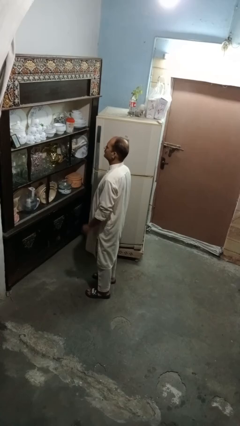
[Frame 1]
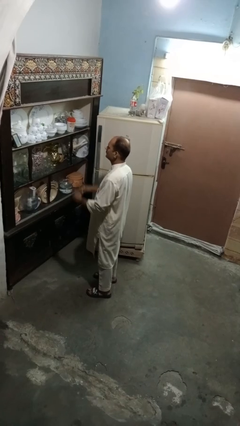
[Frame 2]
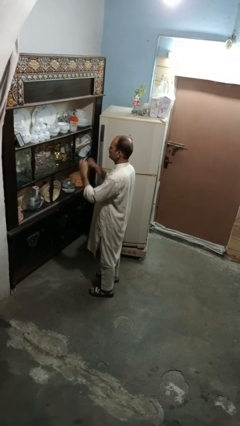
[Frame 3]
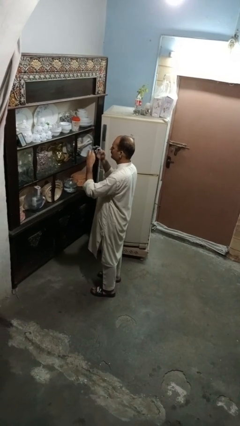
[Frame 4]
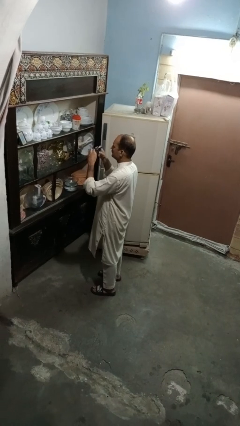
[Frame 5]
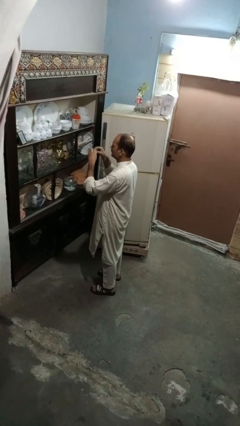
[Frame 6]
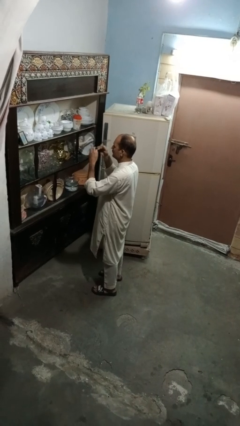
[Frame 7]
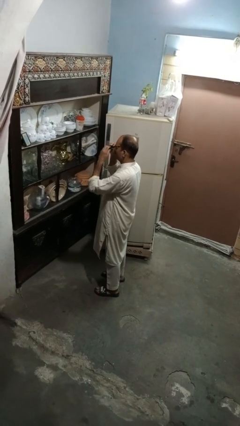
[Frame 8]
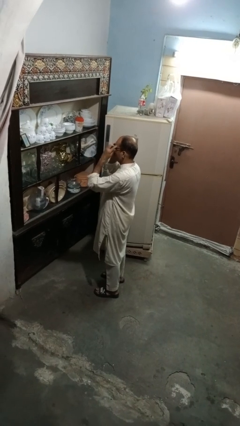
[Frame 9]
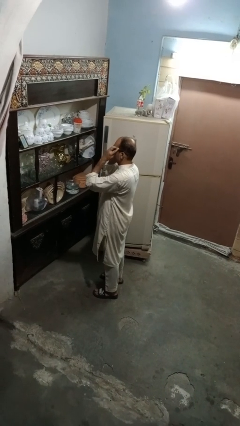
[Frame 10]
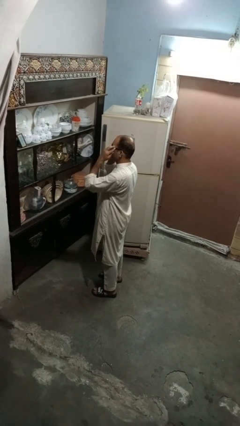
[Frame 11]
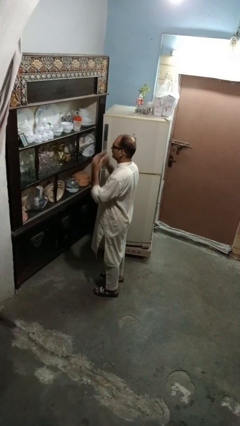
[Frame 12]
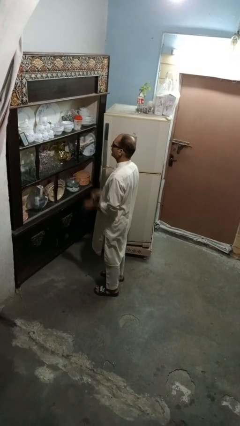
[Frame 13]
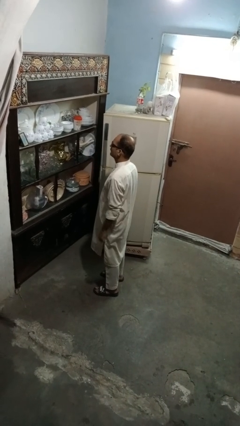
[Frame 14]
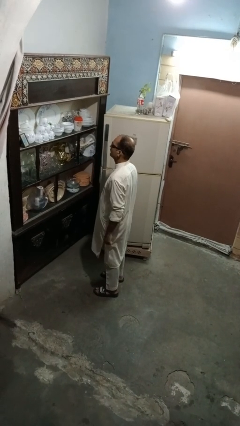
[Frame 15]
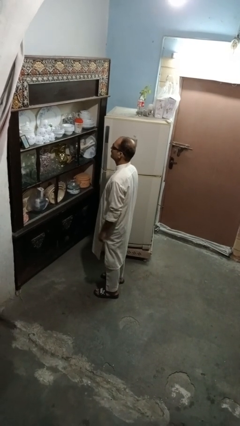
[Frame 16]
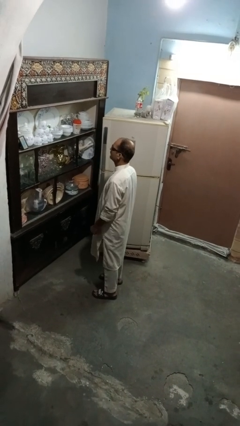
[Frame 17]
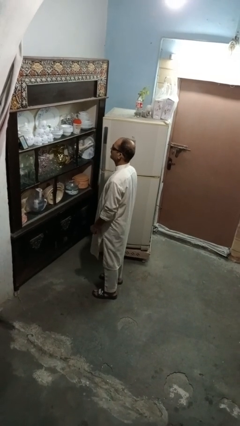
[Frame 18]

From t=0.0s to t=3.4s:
person puts on sunglasses

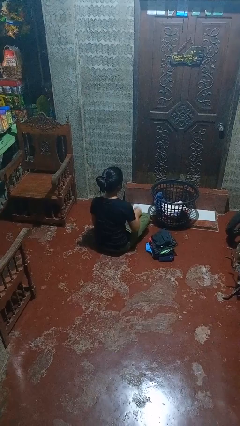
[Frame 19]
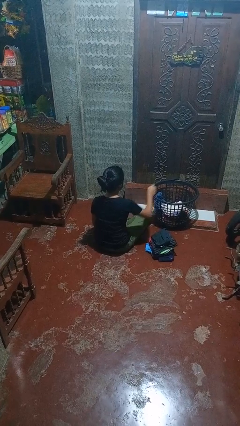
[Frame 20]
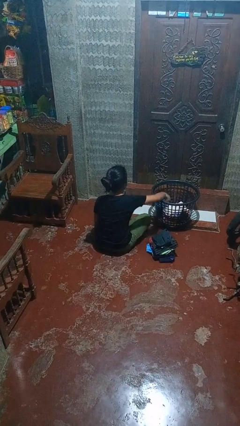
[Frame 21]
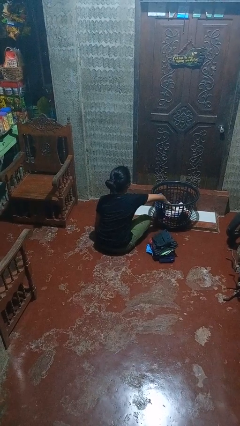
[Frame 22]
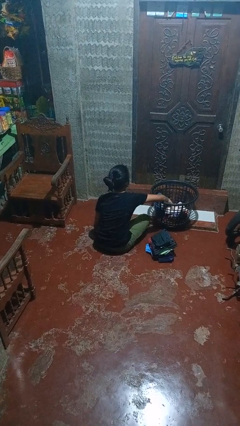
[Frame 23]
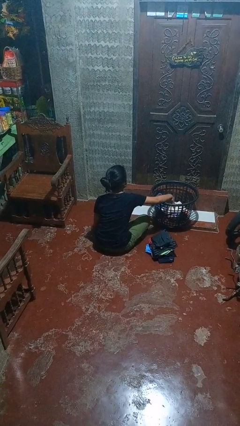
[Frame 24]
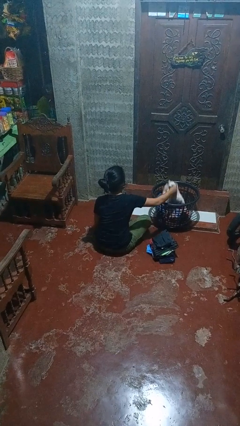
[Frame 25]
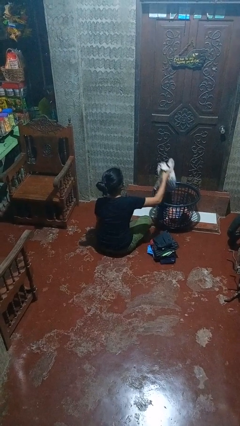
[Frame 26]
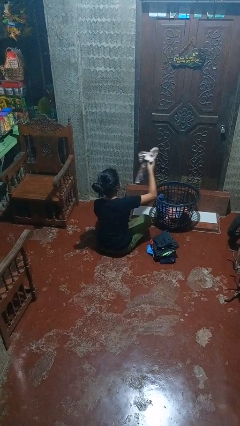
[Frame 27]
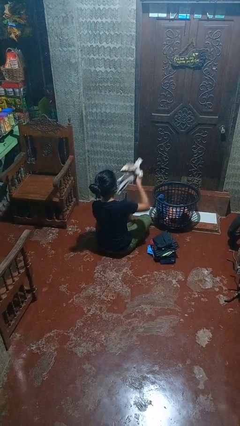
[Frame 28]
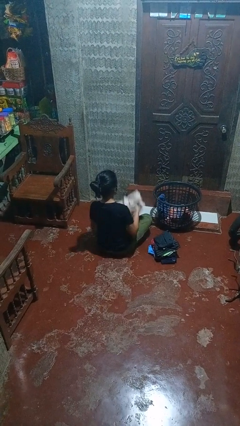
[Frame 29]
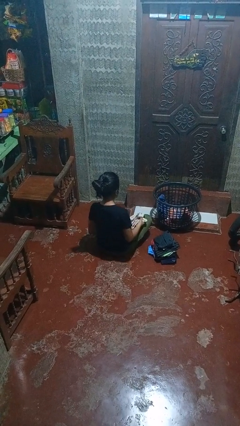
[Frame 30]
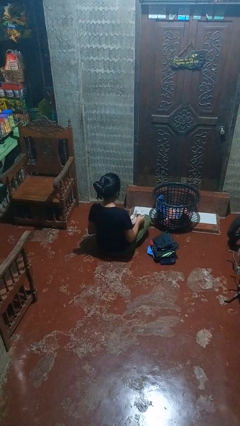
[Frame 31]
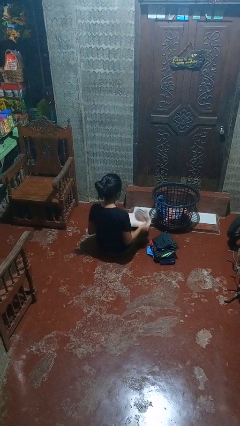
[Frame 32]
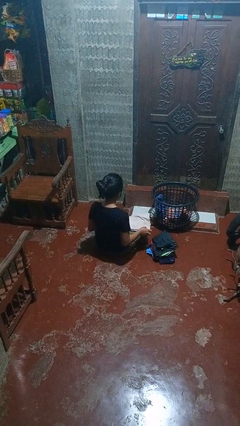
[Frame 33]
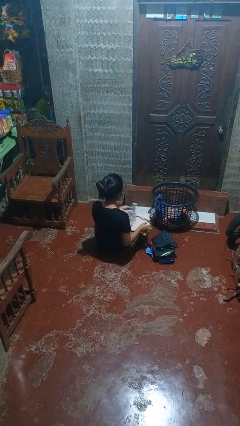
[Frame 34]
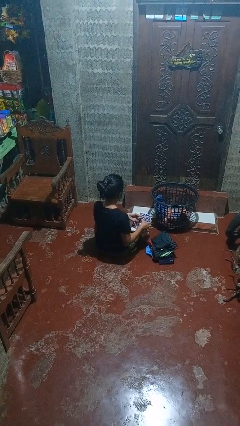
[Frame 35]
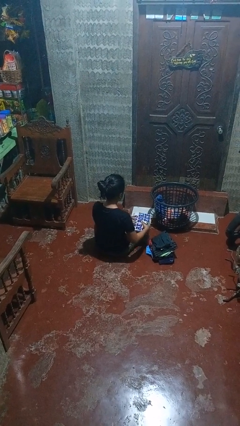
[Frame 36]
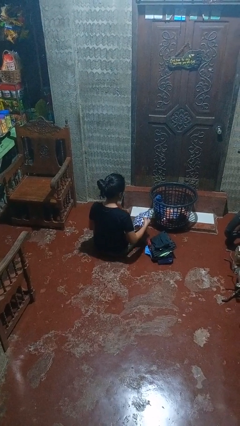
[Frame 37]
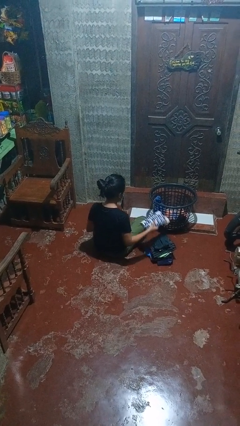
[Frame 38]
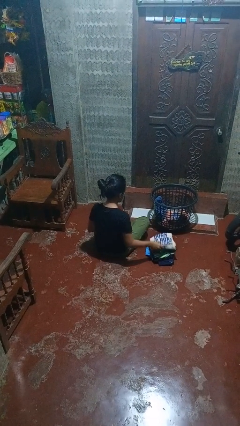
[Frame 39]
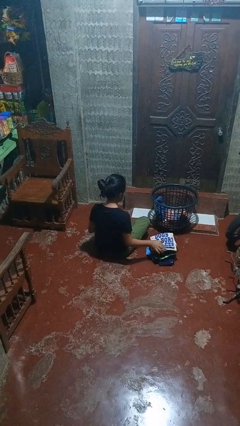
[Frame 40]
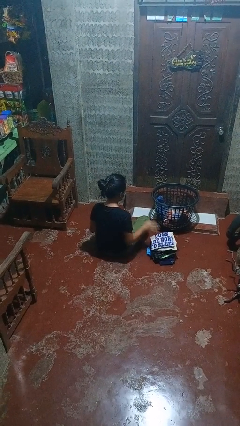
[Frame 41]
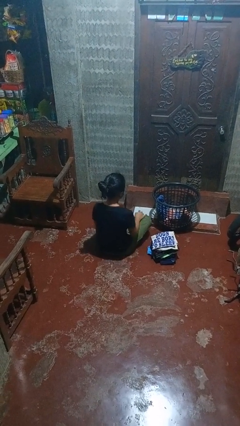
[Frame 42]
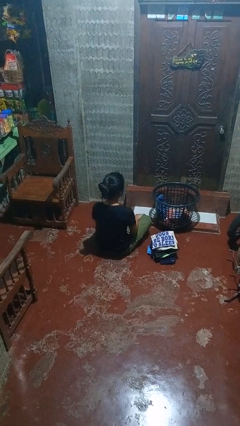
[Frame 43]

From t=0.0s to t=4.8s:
person folds shirt

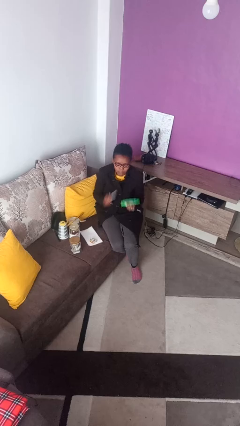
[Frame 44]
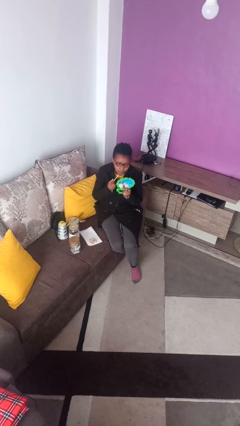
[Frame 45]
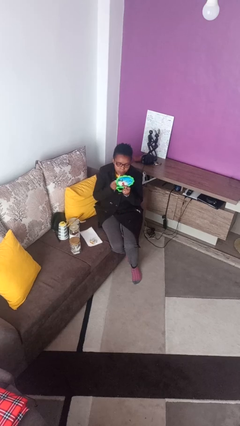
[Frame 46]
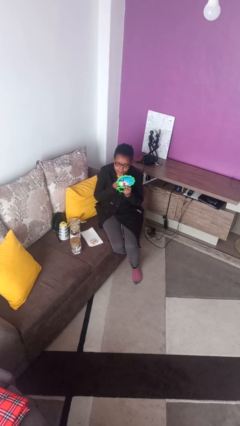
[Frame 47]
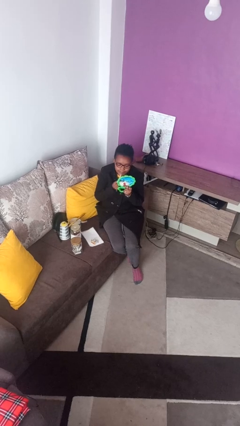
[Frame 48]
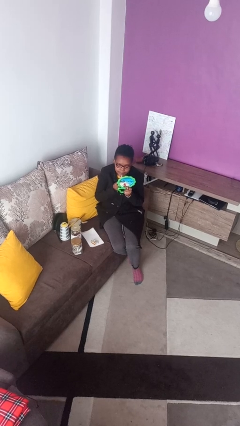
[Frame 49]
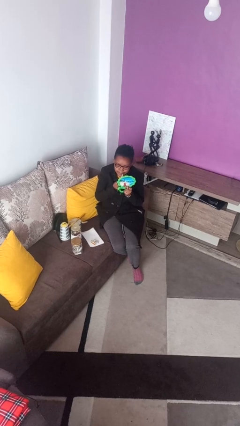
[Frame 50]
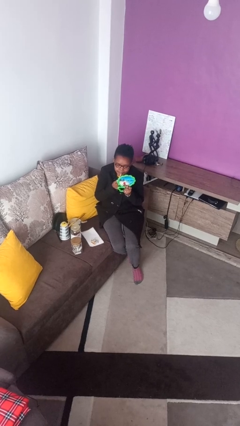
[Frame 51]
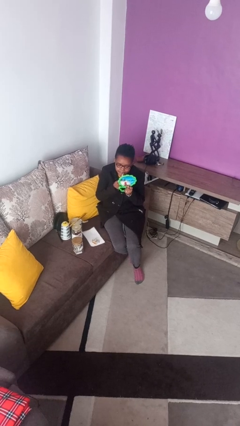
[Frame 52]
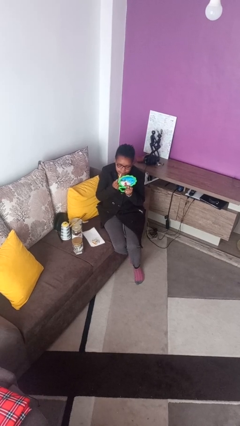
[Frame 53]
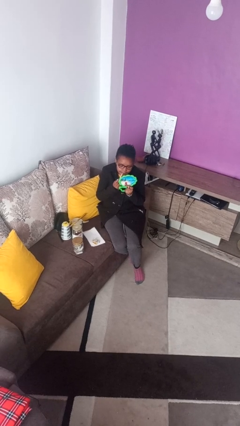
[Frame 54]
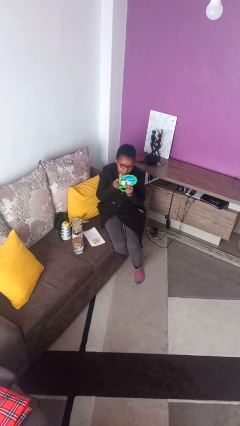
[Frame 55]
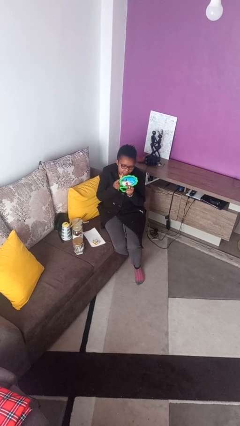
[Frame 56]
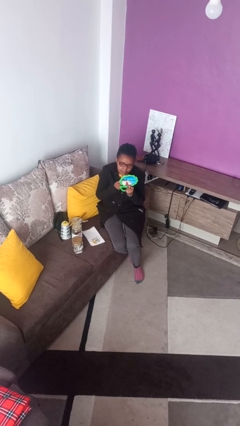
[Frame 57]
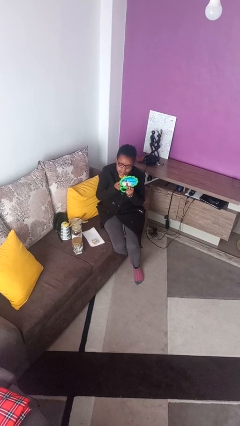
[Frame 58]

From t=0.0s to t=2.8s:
person applies lip makeup

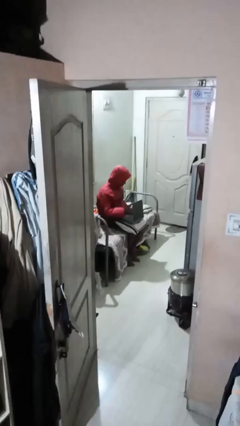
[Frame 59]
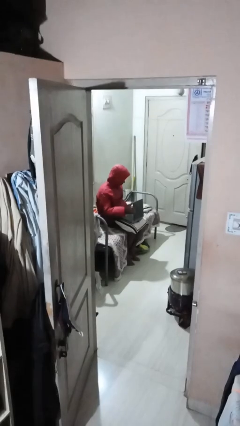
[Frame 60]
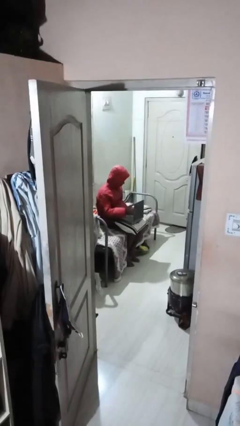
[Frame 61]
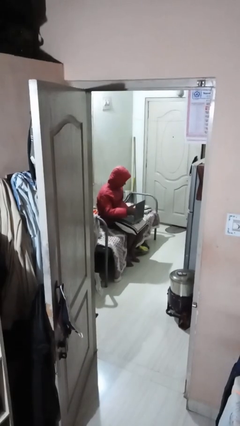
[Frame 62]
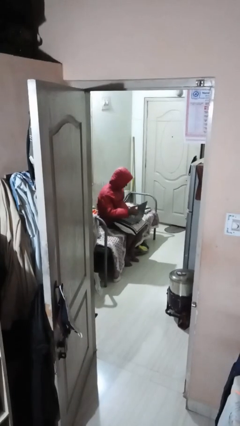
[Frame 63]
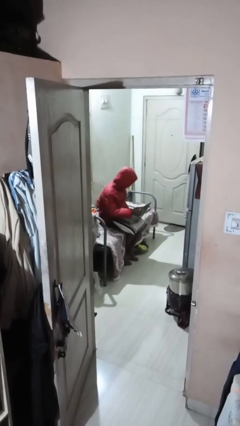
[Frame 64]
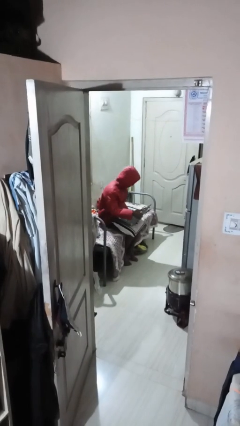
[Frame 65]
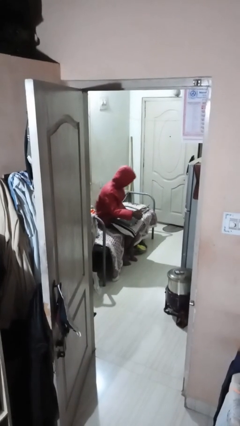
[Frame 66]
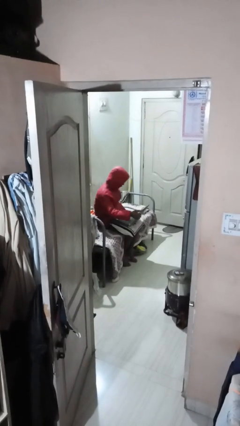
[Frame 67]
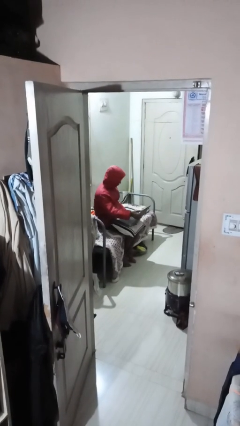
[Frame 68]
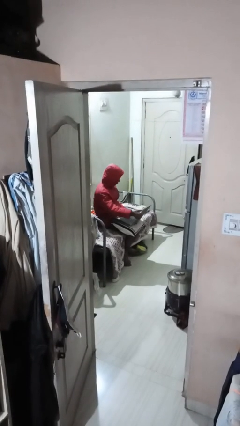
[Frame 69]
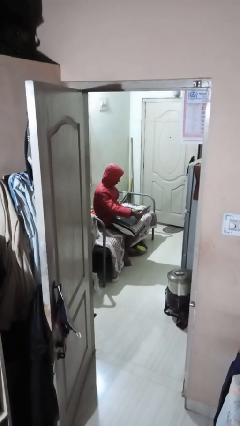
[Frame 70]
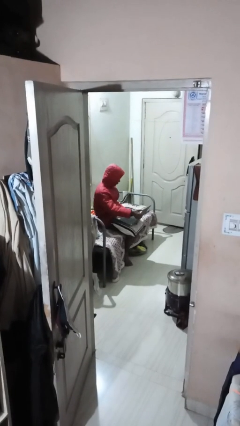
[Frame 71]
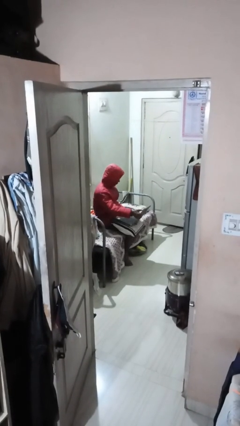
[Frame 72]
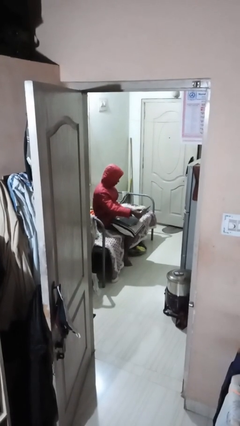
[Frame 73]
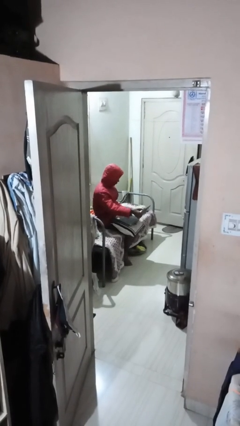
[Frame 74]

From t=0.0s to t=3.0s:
person interacts with laptop

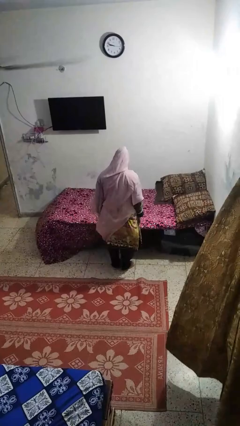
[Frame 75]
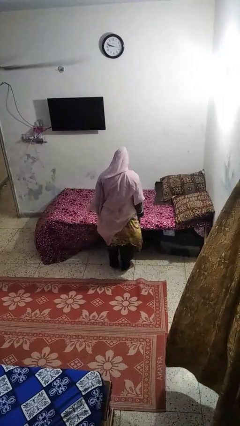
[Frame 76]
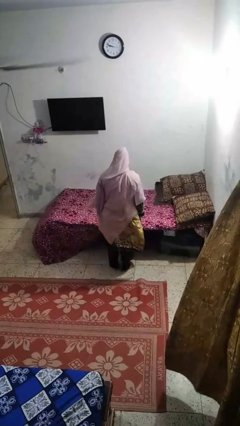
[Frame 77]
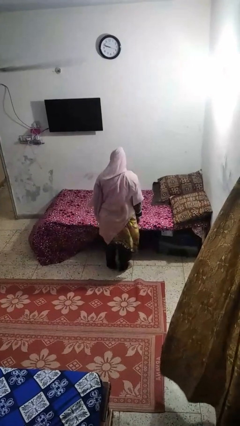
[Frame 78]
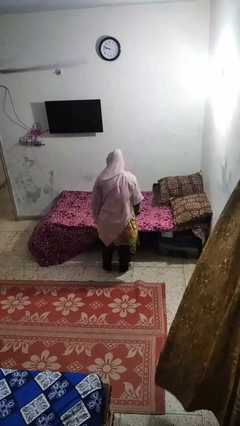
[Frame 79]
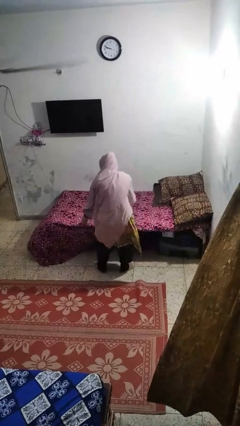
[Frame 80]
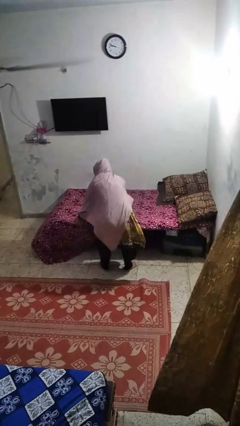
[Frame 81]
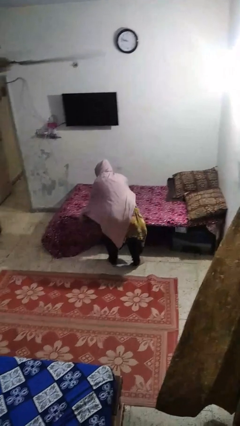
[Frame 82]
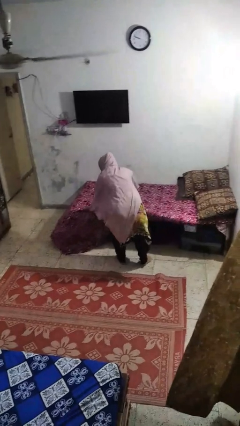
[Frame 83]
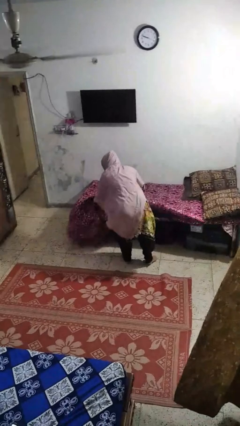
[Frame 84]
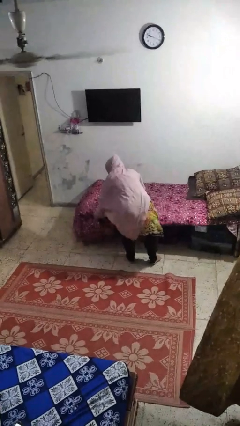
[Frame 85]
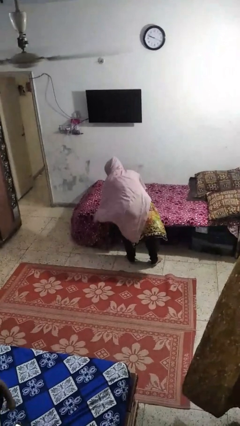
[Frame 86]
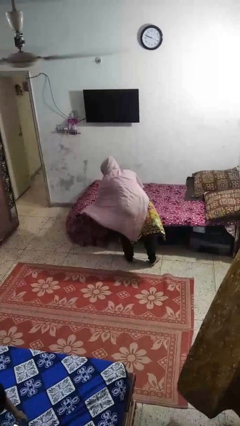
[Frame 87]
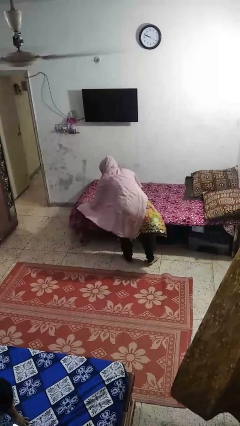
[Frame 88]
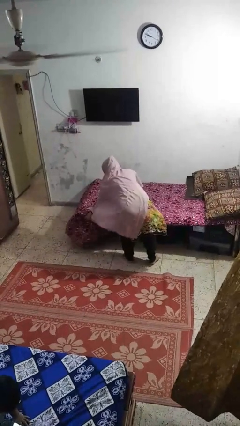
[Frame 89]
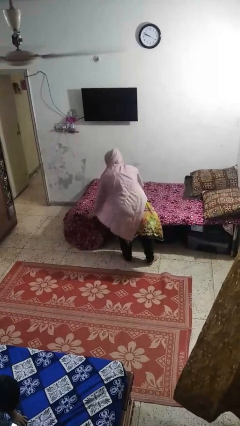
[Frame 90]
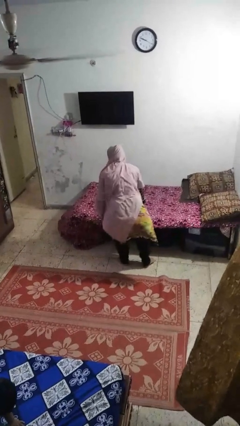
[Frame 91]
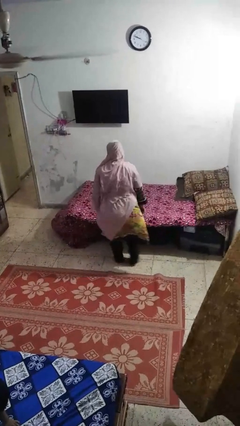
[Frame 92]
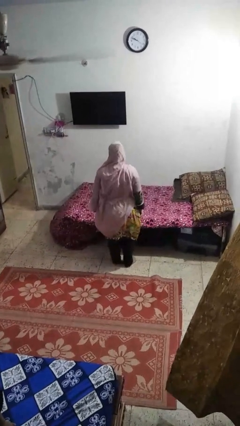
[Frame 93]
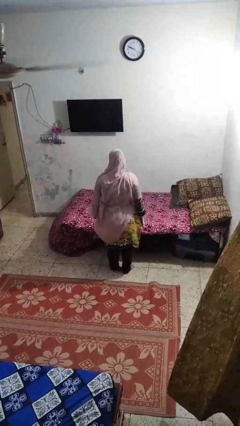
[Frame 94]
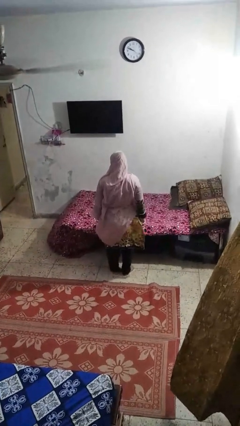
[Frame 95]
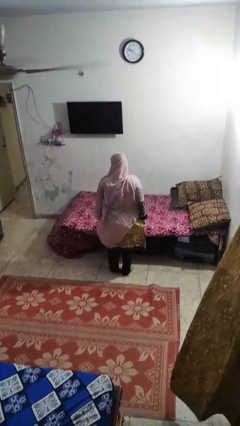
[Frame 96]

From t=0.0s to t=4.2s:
person makes bed
